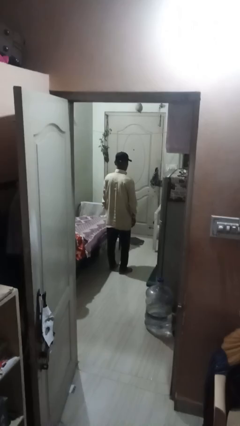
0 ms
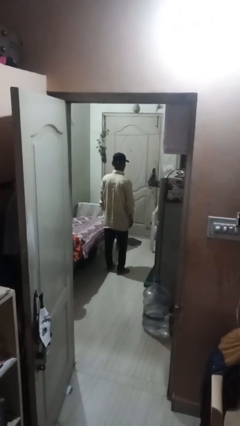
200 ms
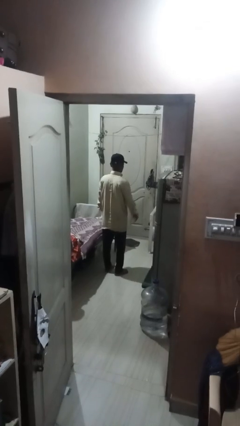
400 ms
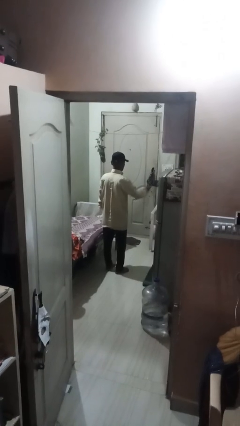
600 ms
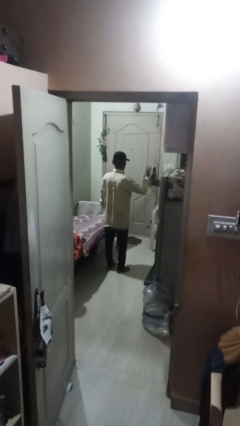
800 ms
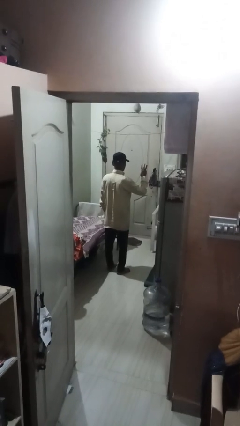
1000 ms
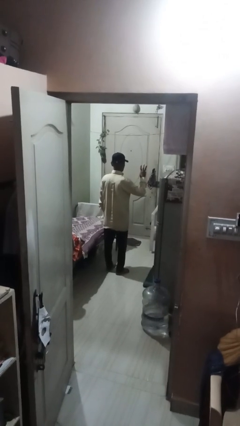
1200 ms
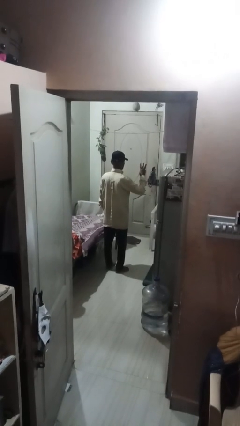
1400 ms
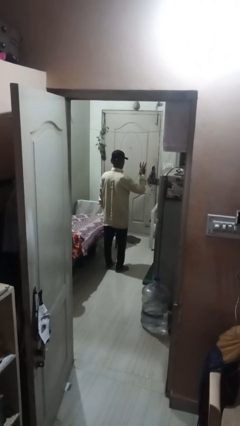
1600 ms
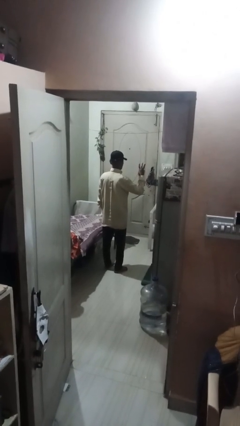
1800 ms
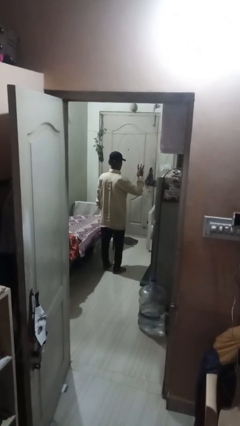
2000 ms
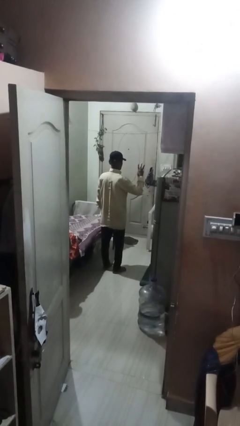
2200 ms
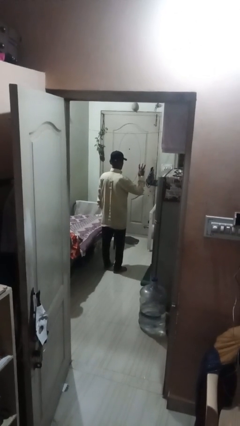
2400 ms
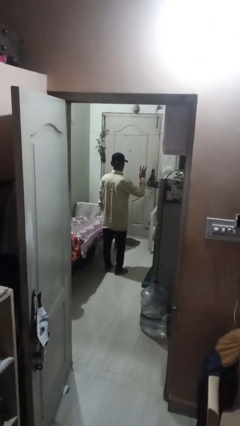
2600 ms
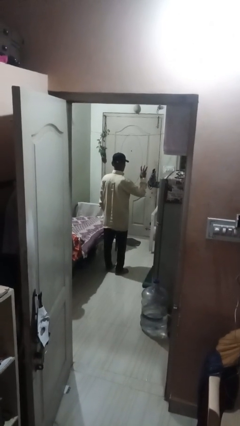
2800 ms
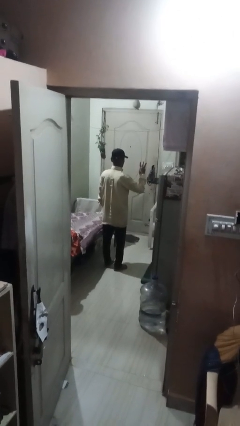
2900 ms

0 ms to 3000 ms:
person gestures number three

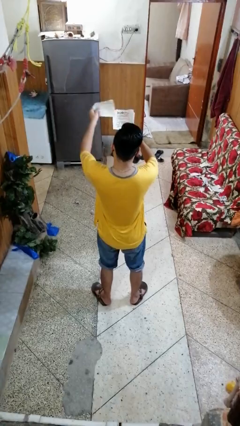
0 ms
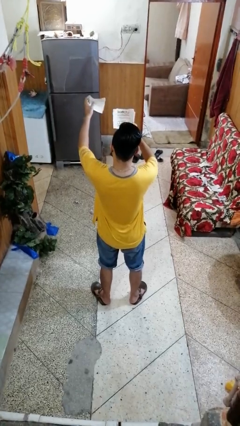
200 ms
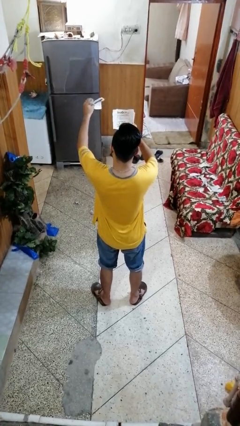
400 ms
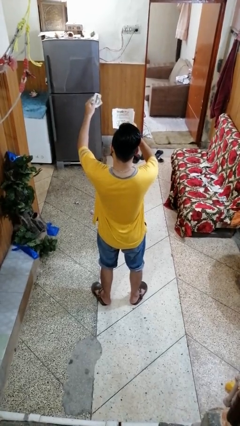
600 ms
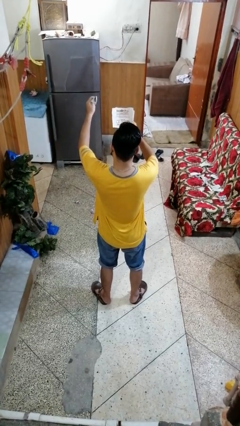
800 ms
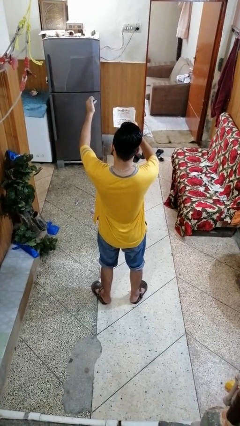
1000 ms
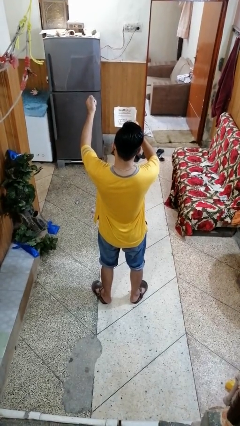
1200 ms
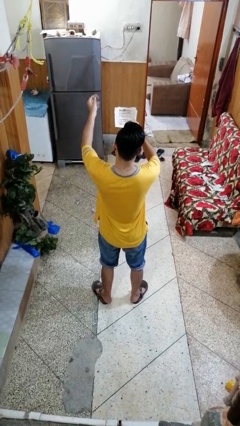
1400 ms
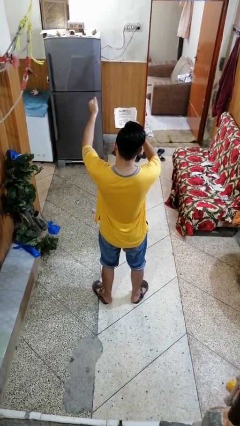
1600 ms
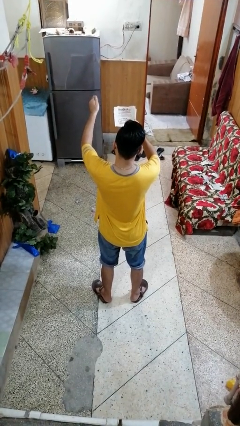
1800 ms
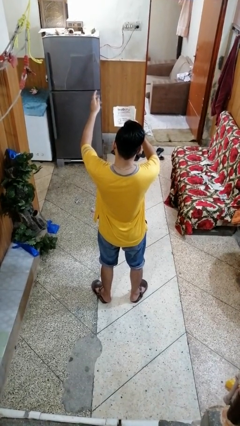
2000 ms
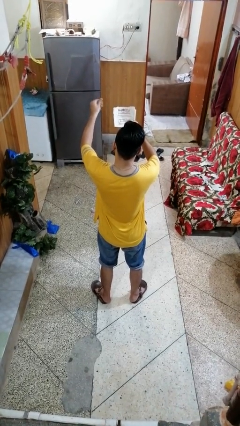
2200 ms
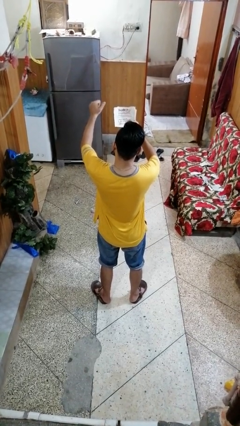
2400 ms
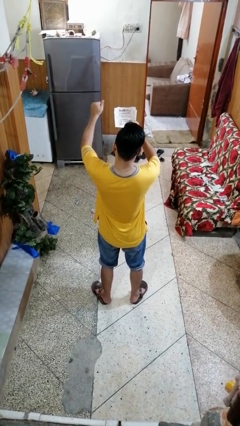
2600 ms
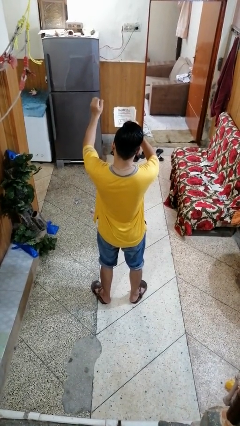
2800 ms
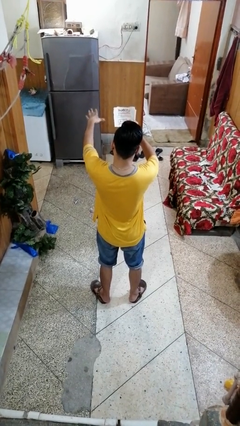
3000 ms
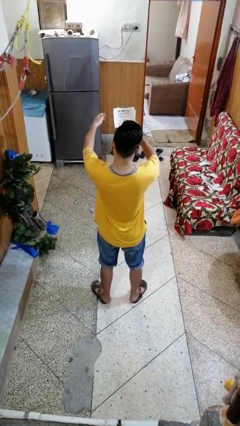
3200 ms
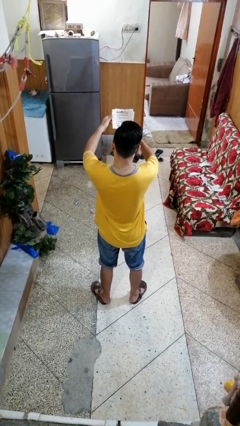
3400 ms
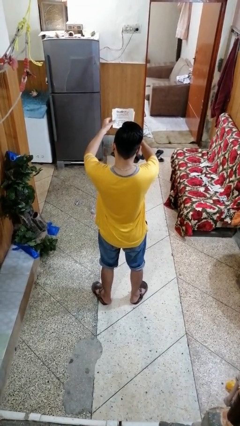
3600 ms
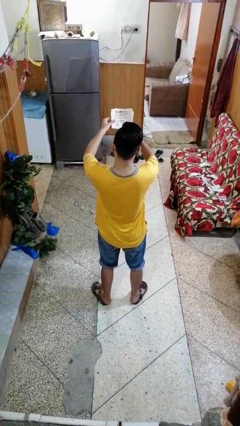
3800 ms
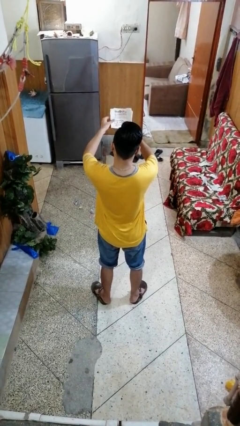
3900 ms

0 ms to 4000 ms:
person crumples paper

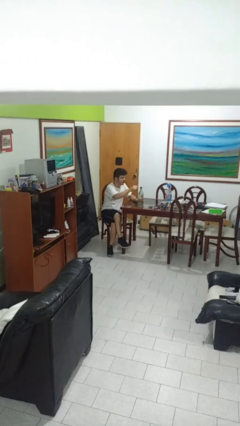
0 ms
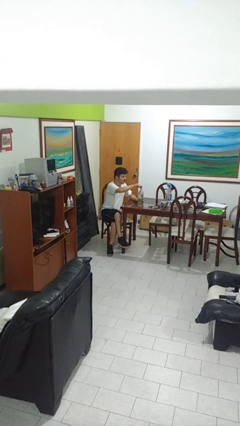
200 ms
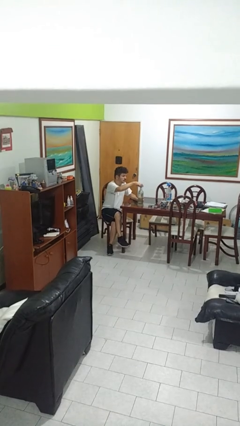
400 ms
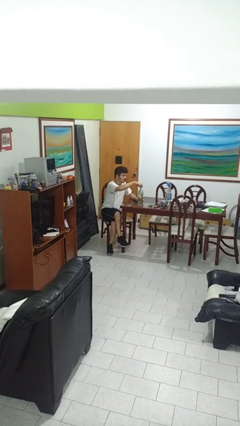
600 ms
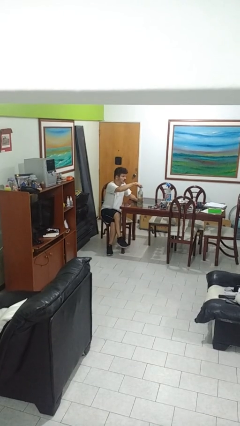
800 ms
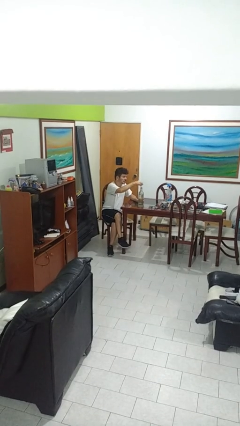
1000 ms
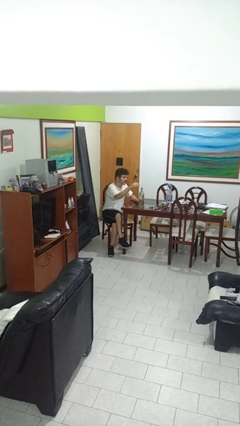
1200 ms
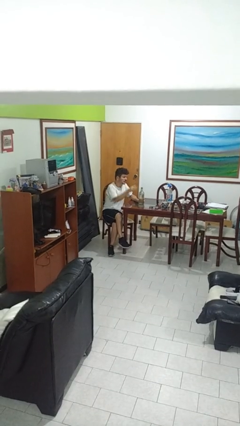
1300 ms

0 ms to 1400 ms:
person unscrews lid from bottle

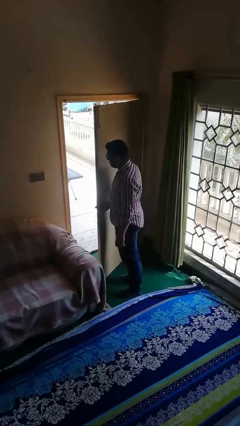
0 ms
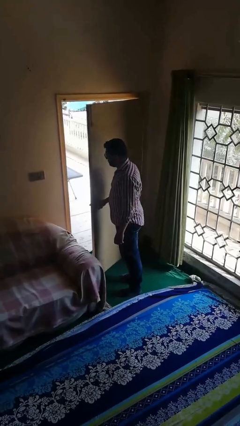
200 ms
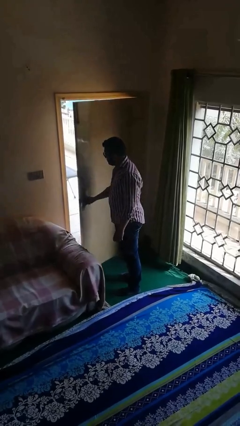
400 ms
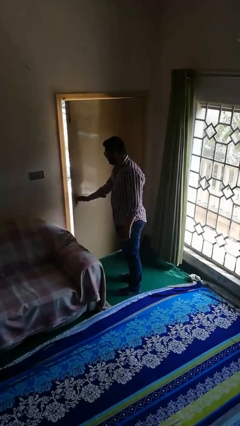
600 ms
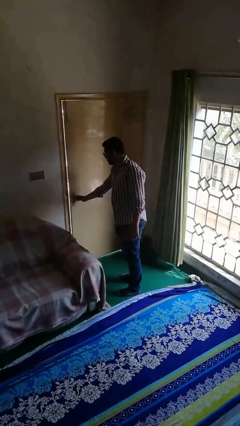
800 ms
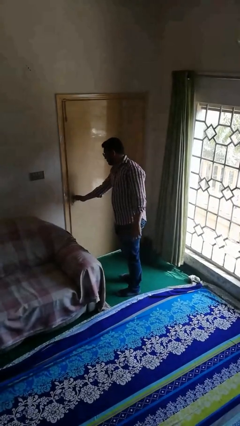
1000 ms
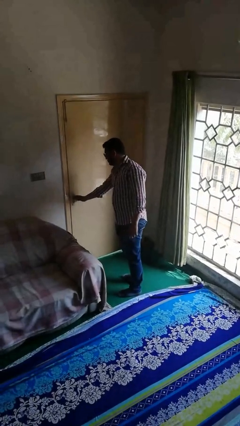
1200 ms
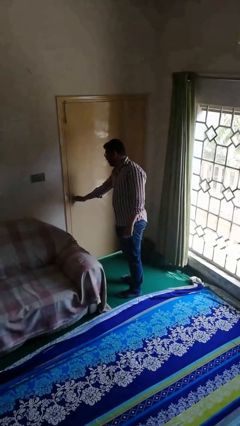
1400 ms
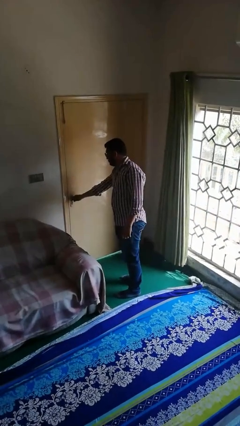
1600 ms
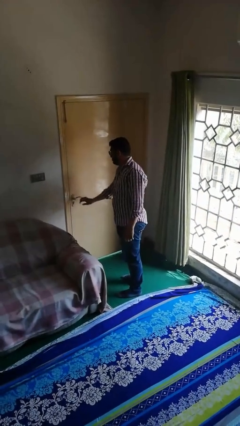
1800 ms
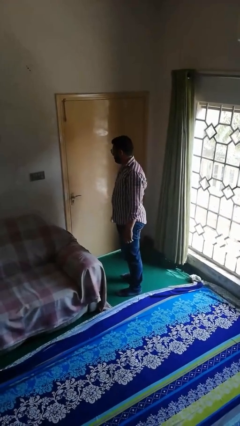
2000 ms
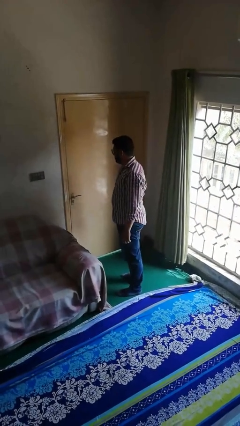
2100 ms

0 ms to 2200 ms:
person closes facility door

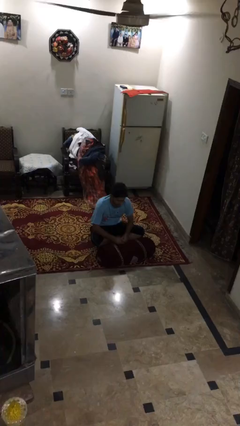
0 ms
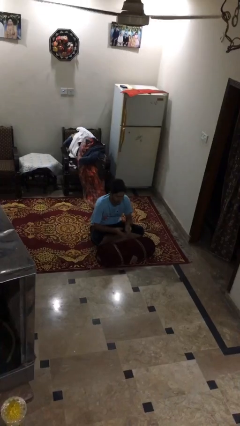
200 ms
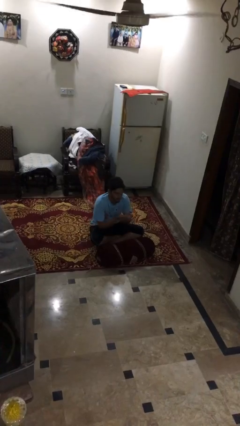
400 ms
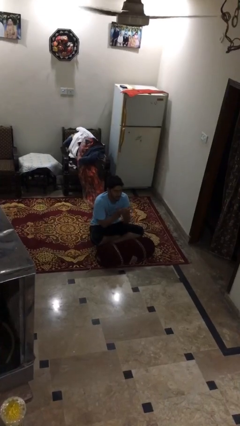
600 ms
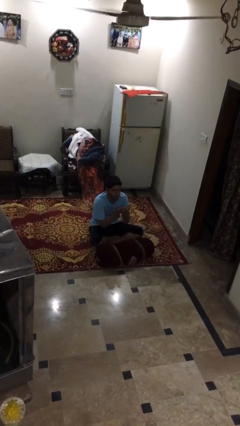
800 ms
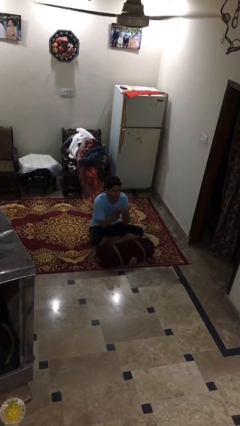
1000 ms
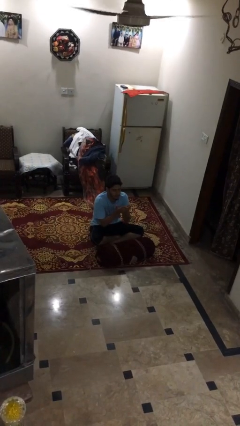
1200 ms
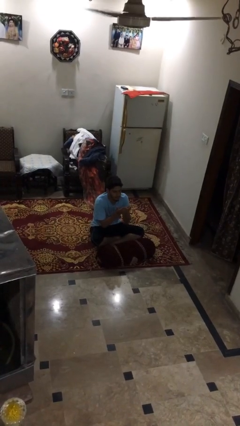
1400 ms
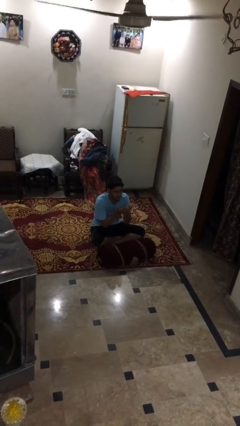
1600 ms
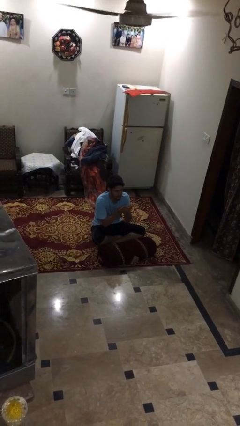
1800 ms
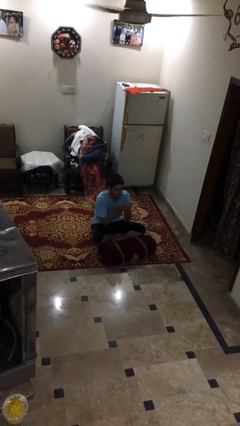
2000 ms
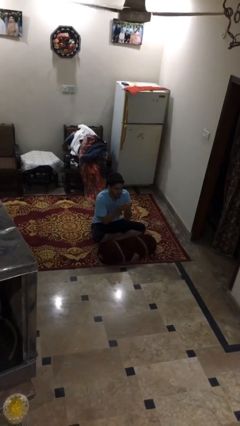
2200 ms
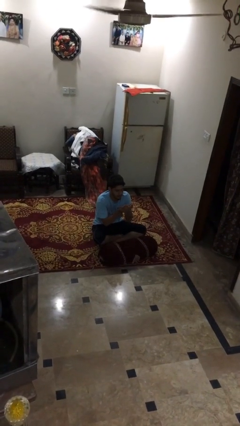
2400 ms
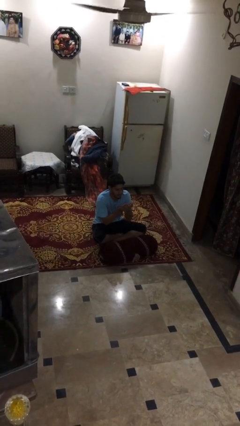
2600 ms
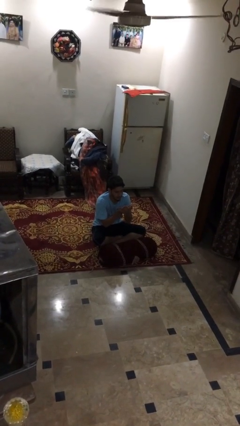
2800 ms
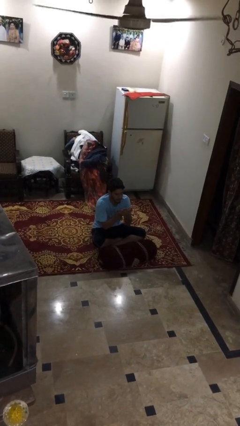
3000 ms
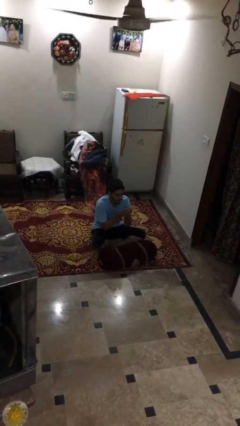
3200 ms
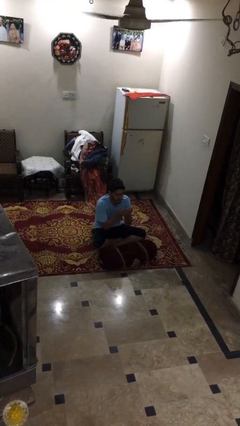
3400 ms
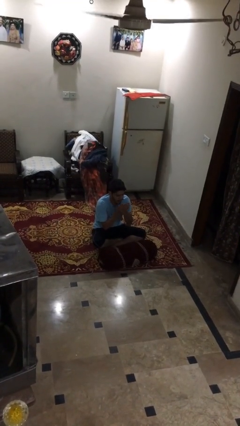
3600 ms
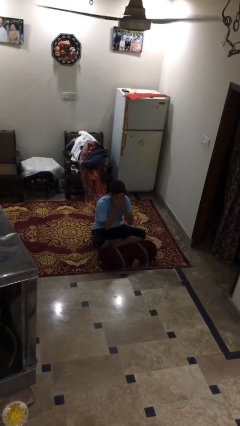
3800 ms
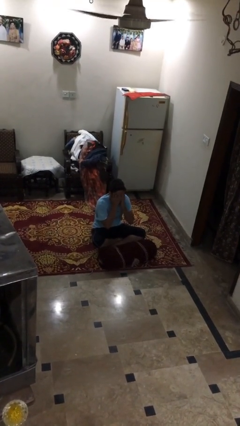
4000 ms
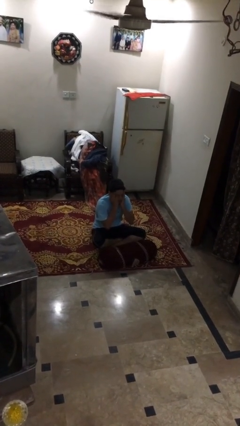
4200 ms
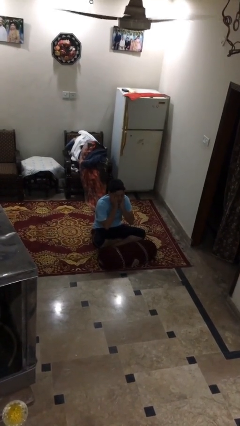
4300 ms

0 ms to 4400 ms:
person prays

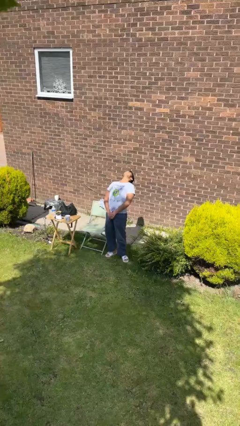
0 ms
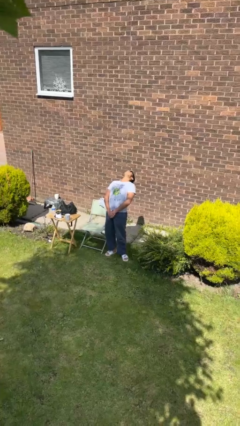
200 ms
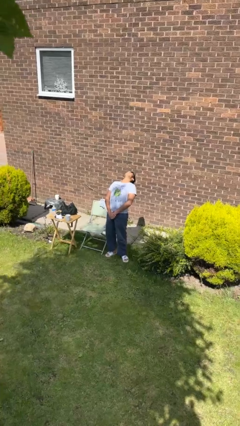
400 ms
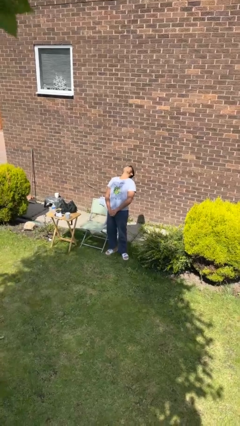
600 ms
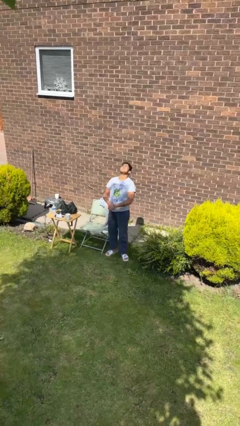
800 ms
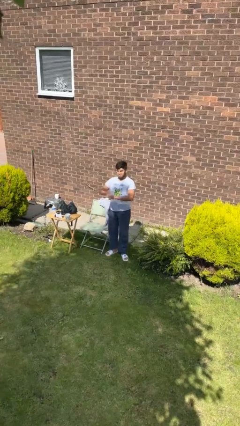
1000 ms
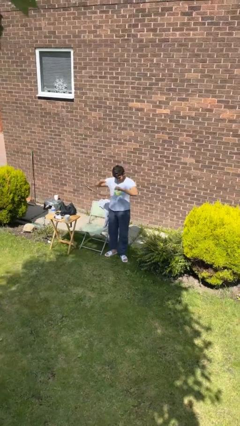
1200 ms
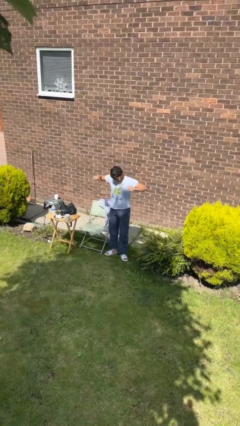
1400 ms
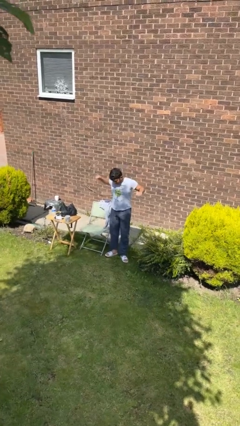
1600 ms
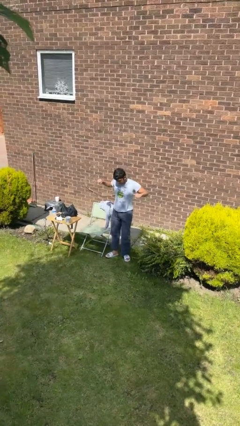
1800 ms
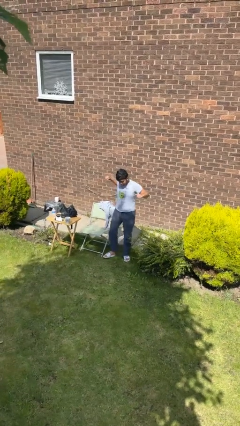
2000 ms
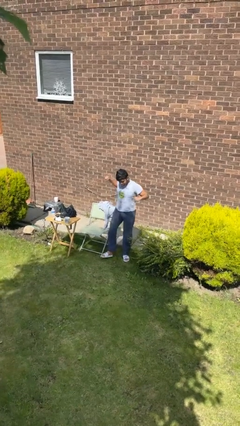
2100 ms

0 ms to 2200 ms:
person stretches arms to side

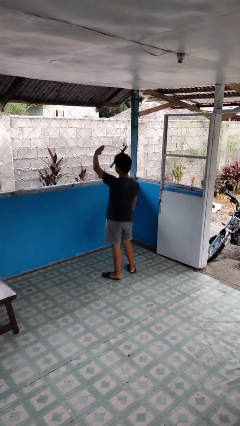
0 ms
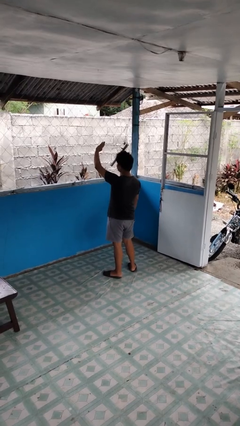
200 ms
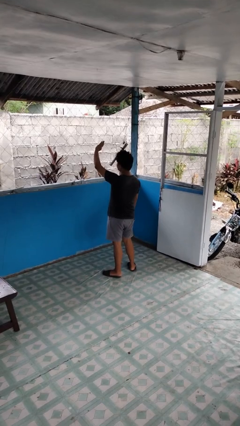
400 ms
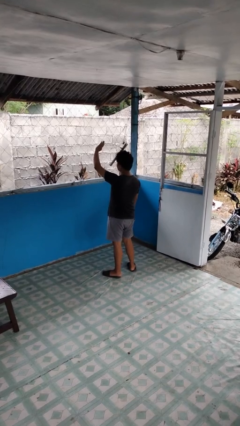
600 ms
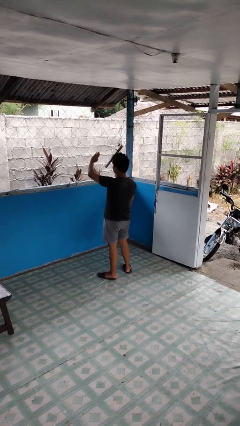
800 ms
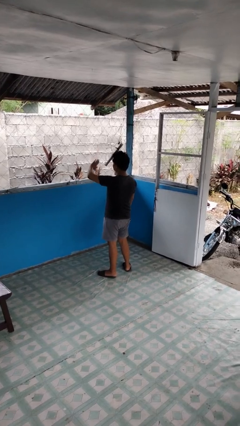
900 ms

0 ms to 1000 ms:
person gestures swipe down
